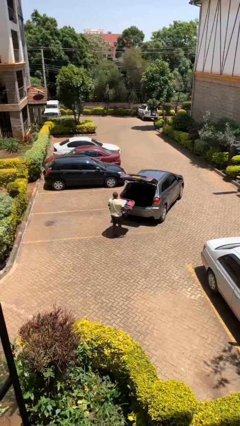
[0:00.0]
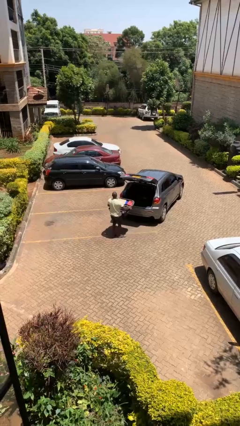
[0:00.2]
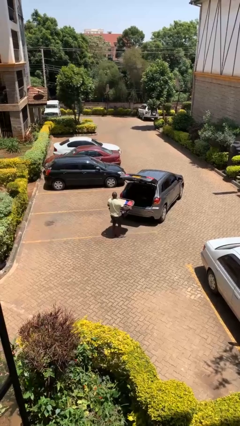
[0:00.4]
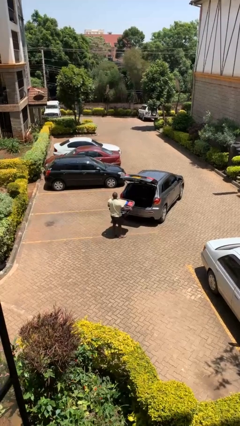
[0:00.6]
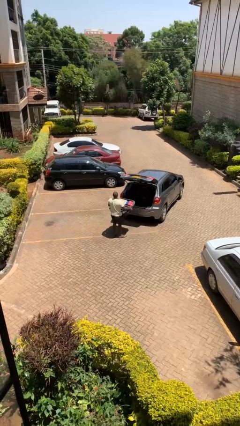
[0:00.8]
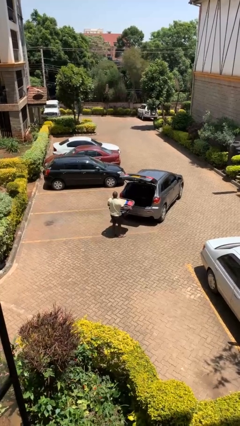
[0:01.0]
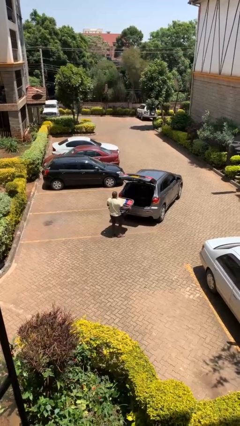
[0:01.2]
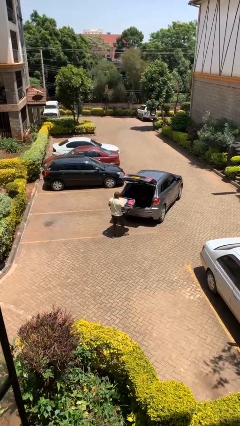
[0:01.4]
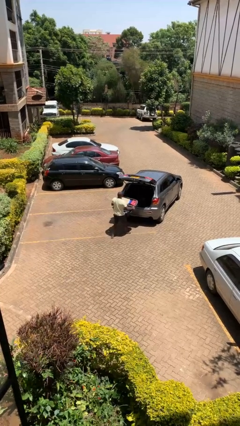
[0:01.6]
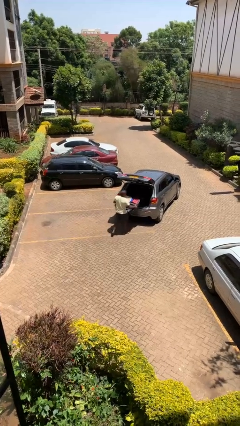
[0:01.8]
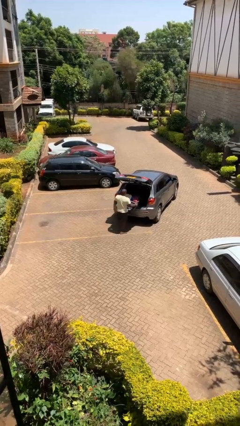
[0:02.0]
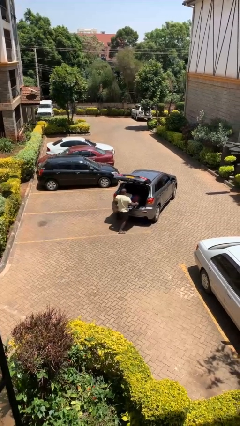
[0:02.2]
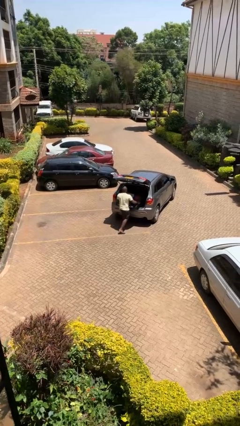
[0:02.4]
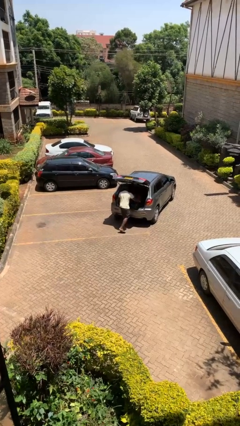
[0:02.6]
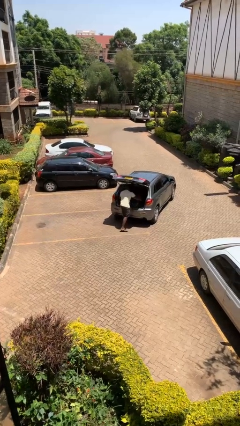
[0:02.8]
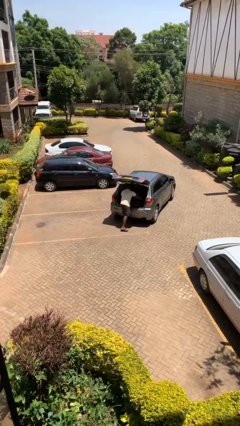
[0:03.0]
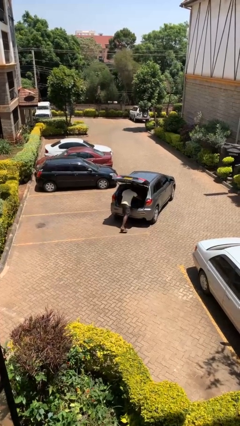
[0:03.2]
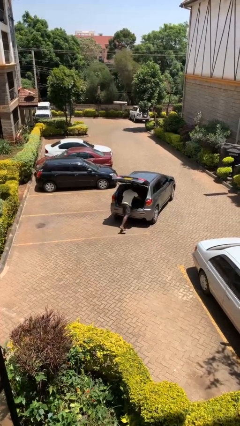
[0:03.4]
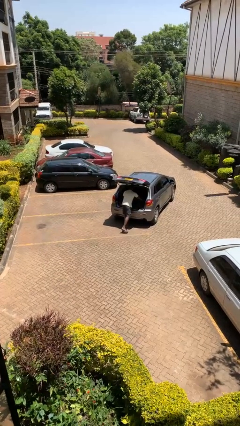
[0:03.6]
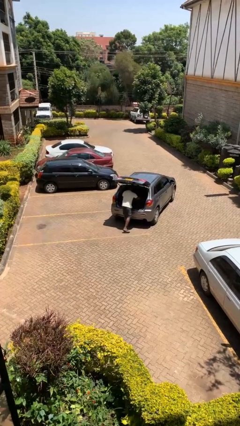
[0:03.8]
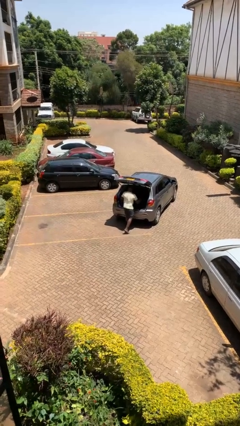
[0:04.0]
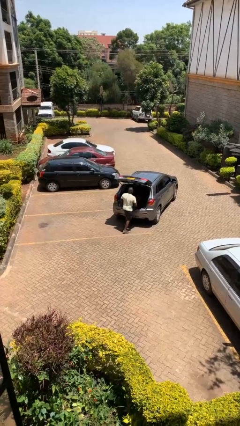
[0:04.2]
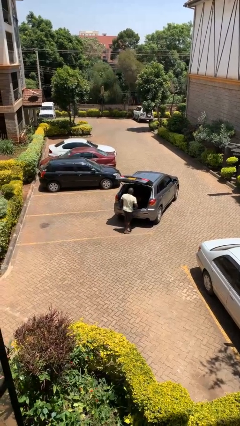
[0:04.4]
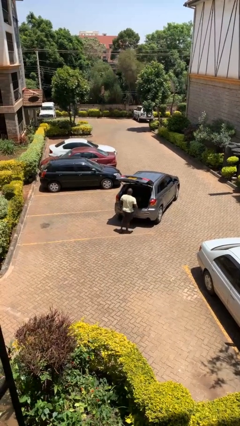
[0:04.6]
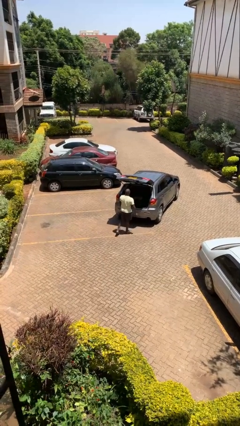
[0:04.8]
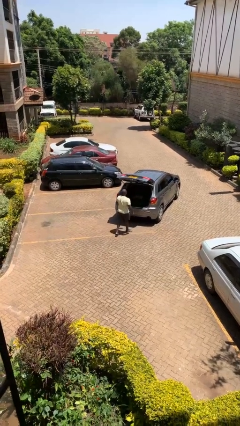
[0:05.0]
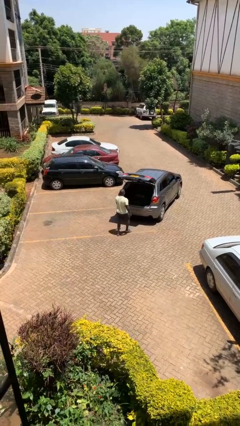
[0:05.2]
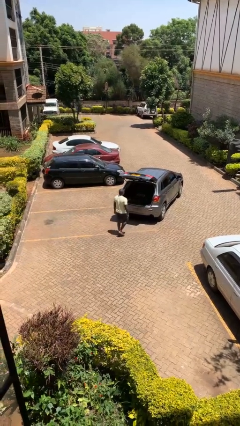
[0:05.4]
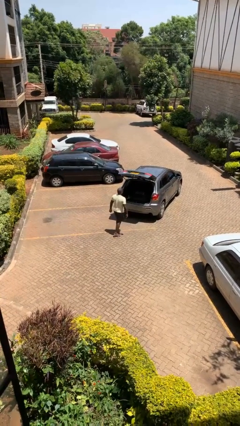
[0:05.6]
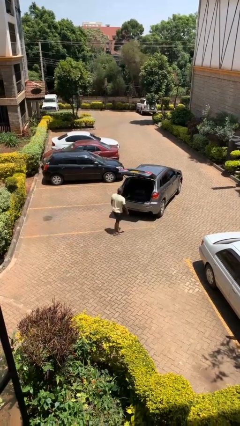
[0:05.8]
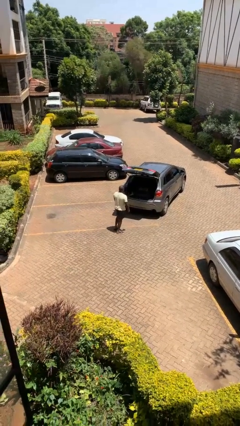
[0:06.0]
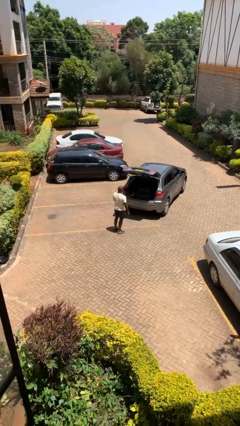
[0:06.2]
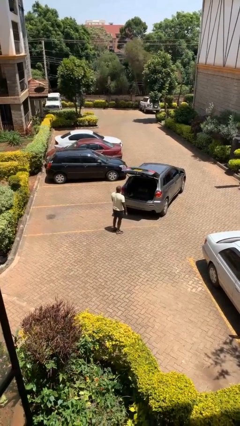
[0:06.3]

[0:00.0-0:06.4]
person loads car

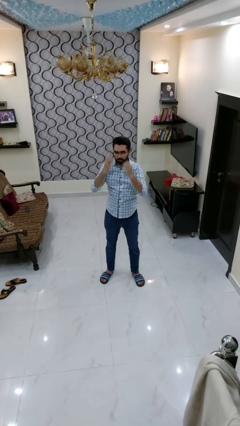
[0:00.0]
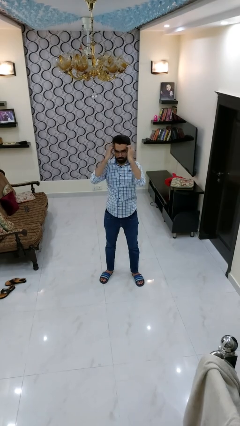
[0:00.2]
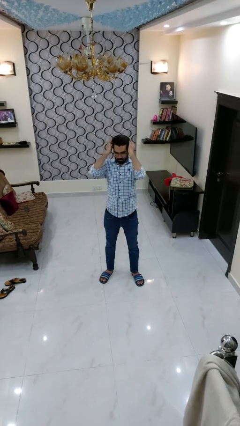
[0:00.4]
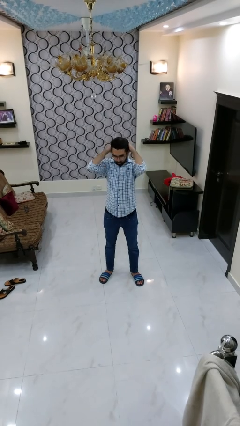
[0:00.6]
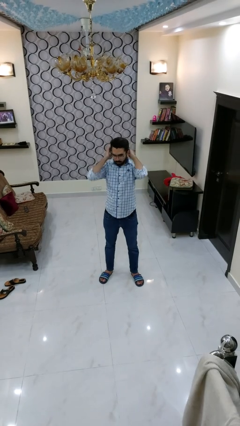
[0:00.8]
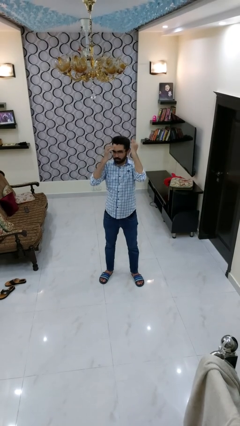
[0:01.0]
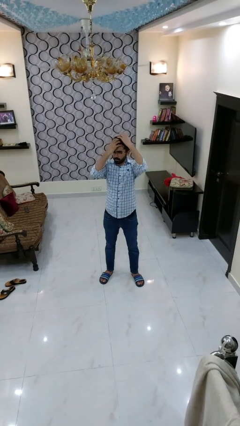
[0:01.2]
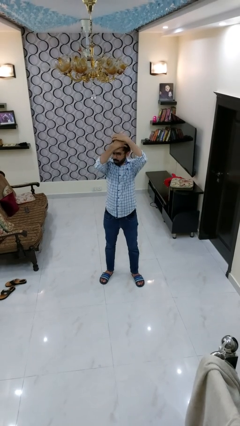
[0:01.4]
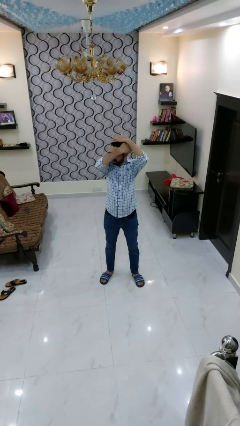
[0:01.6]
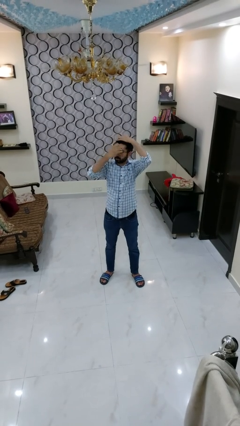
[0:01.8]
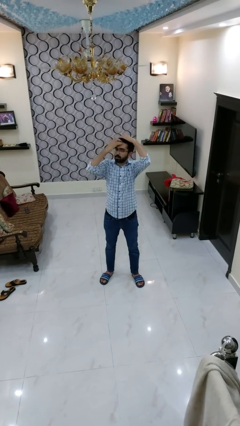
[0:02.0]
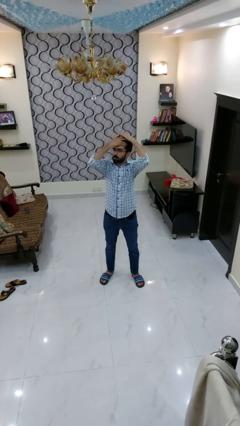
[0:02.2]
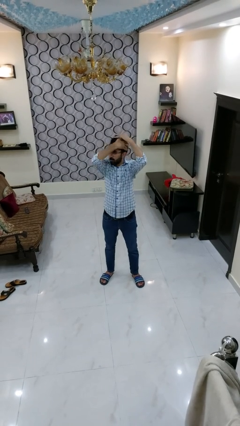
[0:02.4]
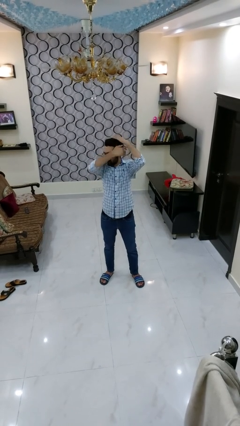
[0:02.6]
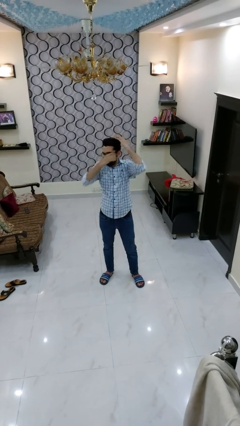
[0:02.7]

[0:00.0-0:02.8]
person strokes hair

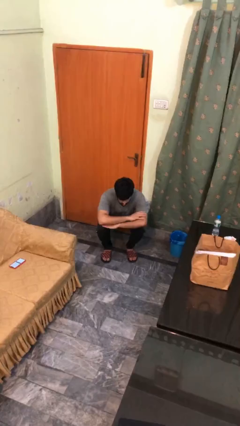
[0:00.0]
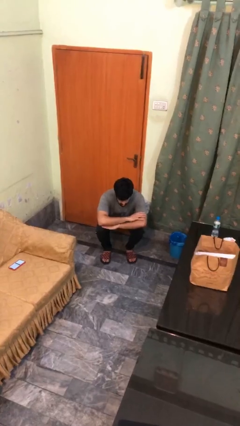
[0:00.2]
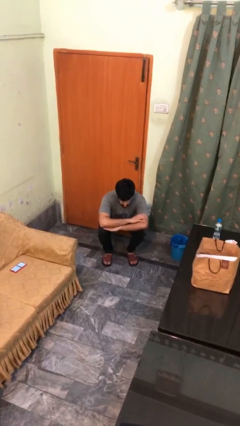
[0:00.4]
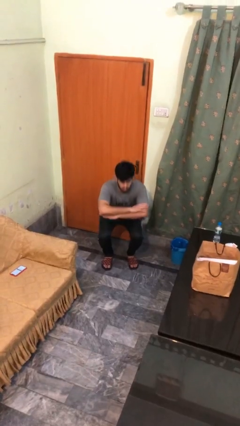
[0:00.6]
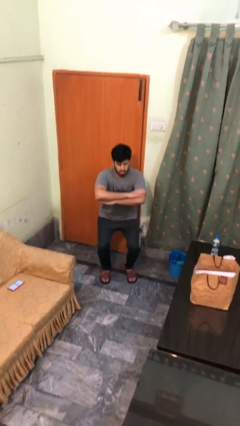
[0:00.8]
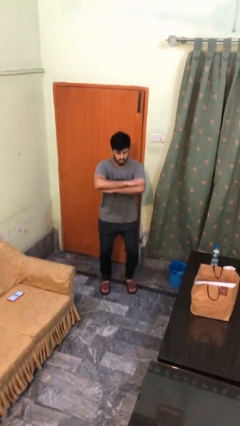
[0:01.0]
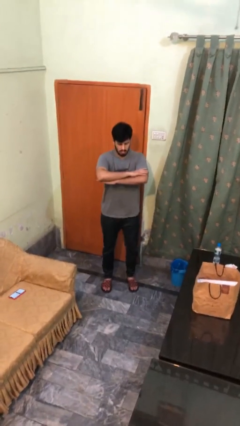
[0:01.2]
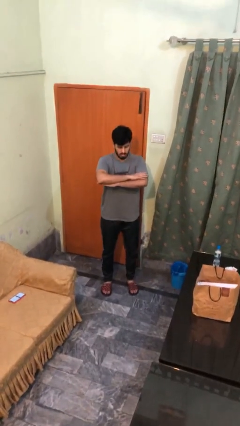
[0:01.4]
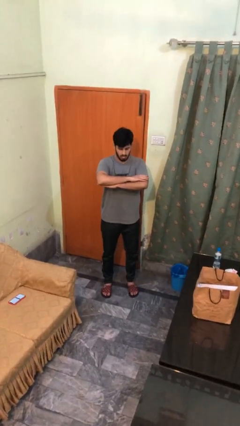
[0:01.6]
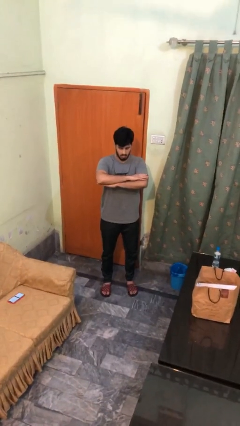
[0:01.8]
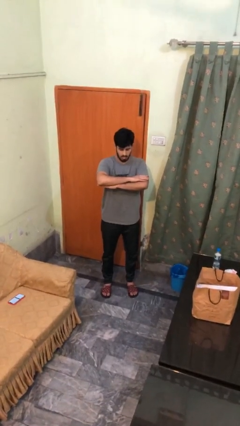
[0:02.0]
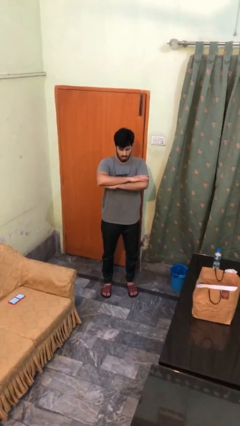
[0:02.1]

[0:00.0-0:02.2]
person stands up

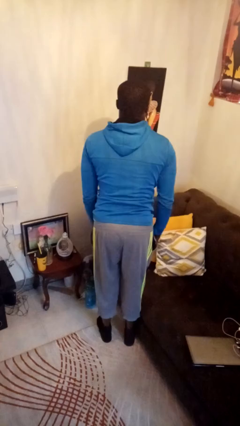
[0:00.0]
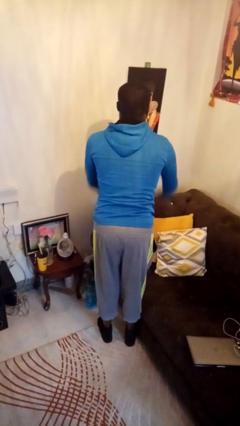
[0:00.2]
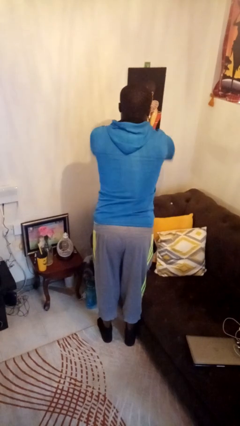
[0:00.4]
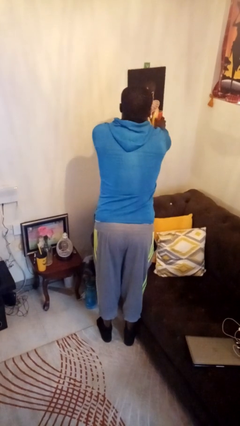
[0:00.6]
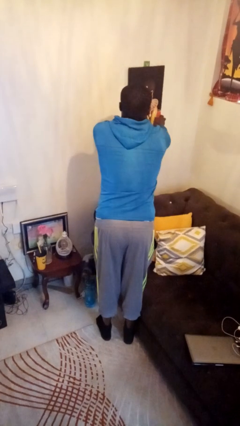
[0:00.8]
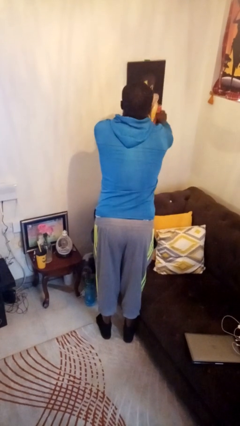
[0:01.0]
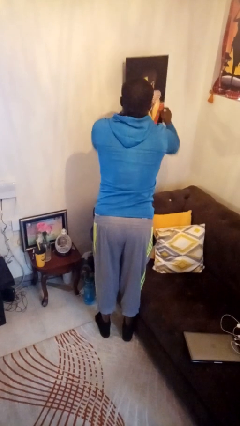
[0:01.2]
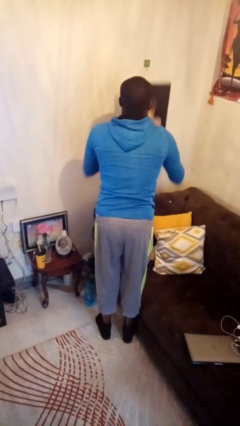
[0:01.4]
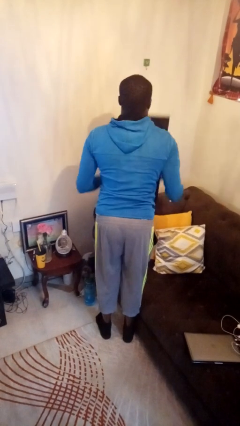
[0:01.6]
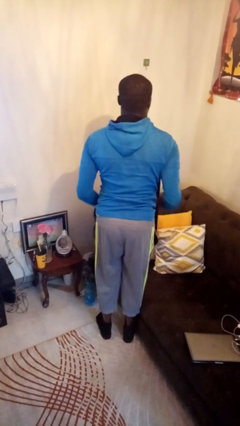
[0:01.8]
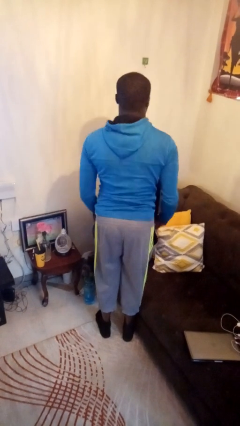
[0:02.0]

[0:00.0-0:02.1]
person takes down picture frame

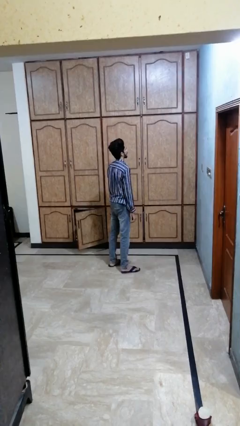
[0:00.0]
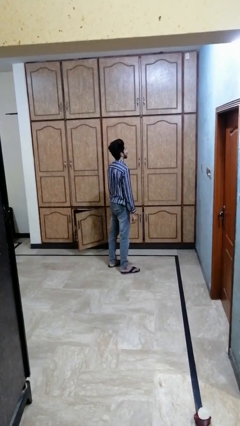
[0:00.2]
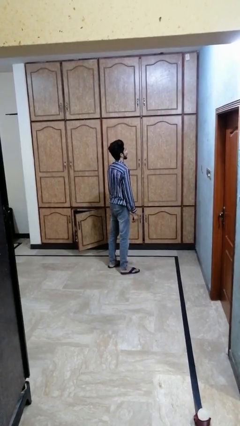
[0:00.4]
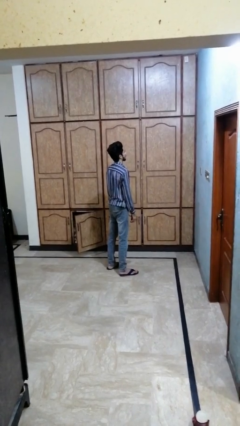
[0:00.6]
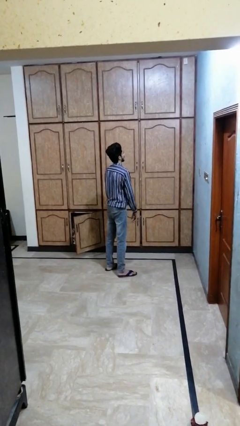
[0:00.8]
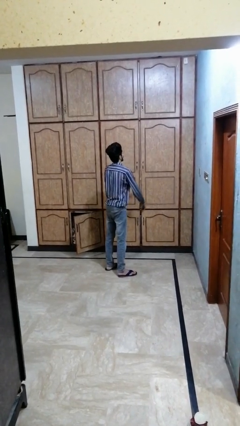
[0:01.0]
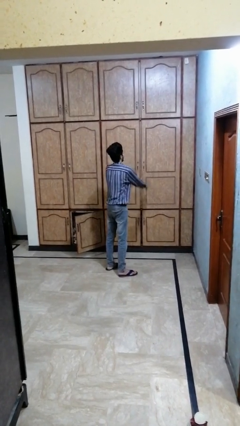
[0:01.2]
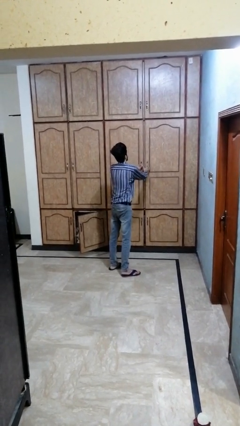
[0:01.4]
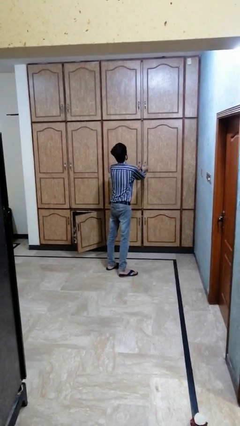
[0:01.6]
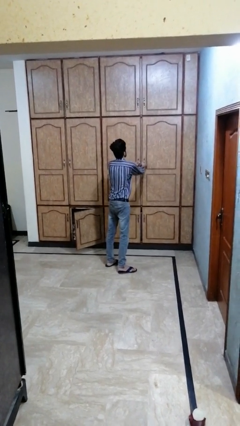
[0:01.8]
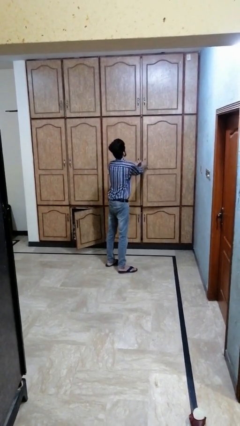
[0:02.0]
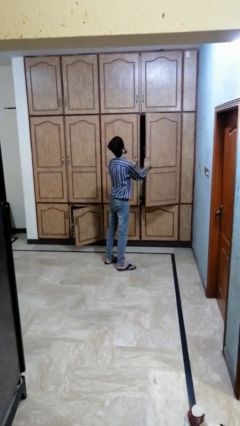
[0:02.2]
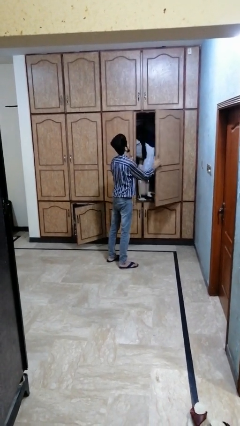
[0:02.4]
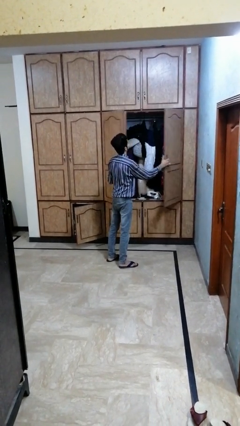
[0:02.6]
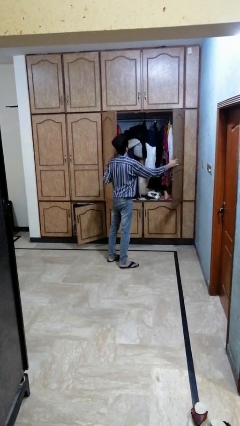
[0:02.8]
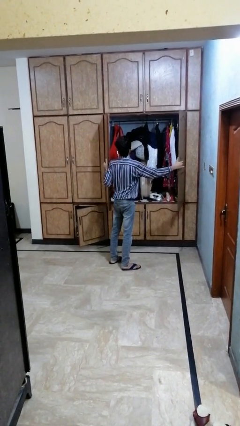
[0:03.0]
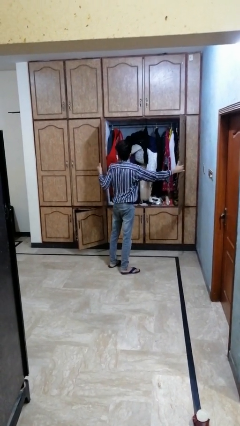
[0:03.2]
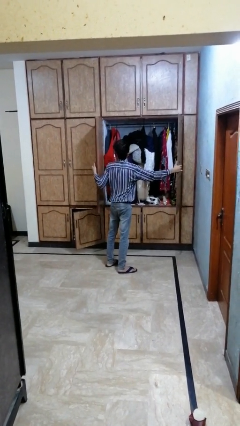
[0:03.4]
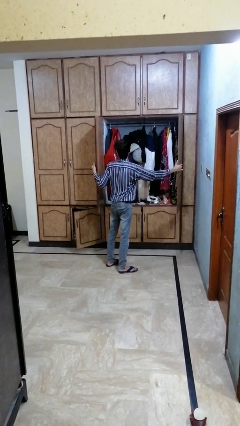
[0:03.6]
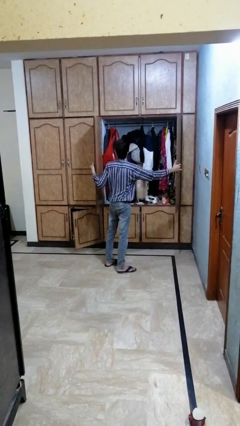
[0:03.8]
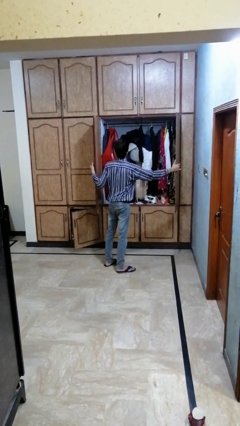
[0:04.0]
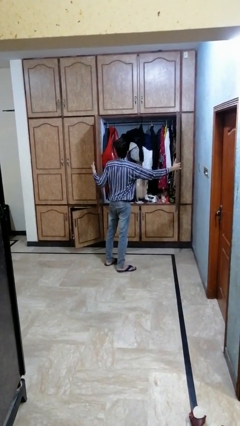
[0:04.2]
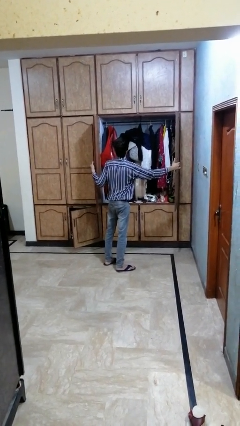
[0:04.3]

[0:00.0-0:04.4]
person opens dresser drawer
